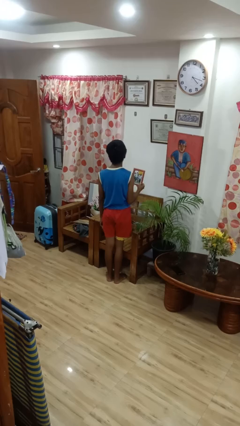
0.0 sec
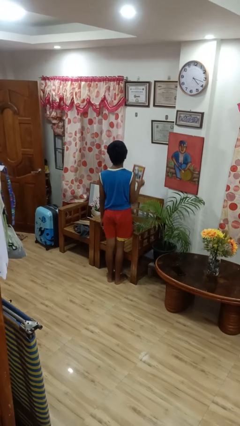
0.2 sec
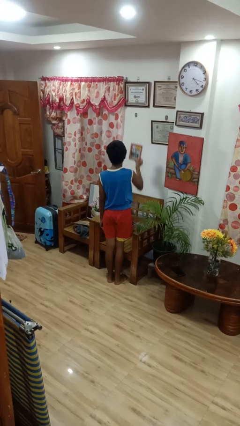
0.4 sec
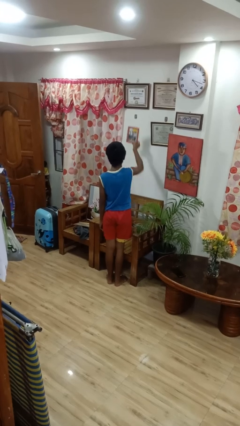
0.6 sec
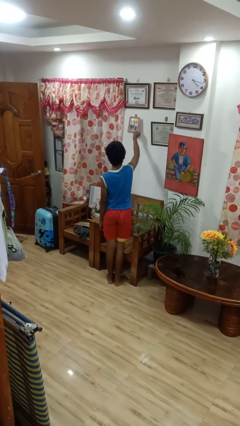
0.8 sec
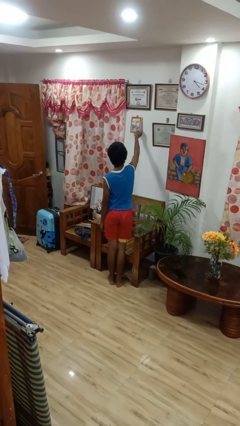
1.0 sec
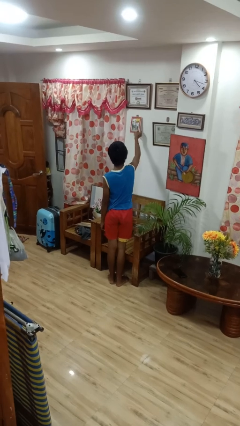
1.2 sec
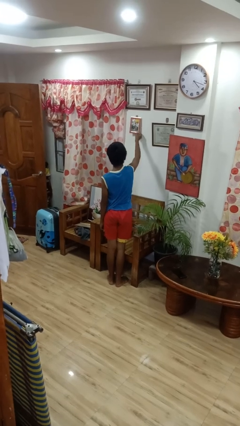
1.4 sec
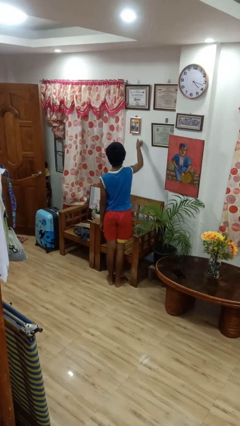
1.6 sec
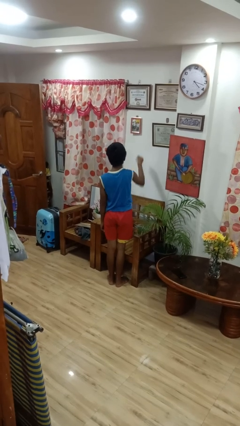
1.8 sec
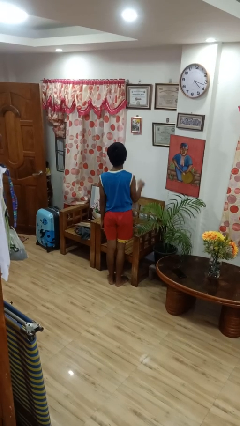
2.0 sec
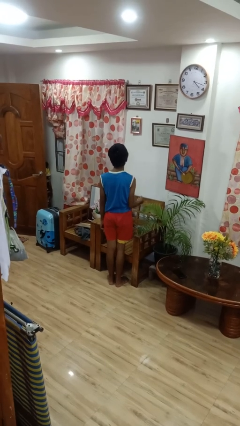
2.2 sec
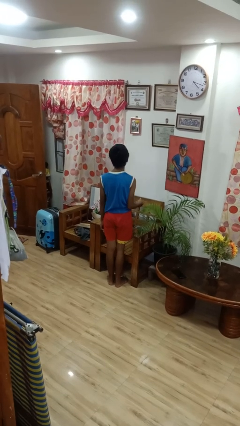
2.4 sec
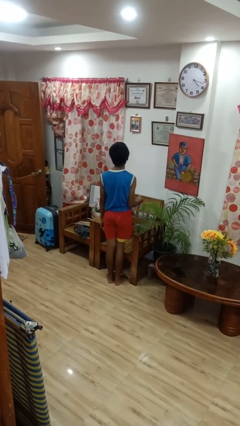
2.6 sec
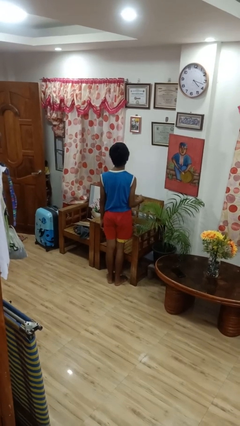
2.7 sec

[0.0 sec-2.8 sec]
person puts up picture frame

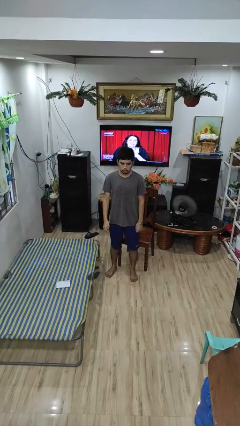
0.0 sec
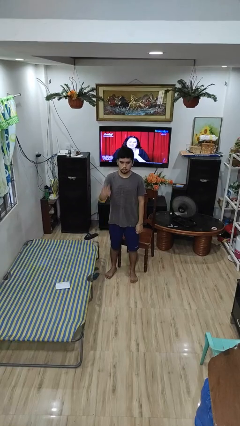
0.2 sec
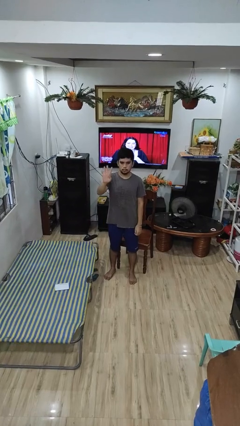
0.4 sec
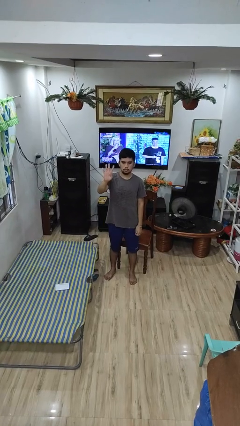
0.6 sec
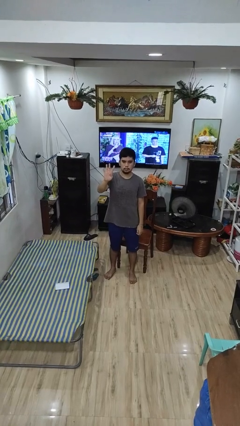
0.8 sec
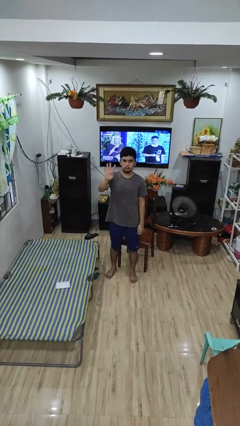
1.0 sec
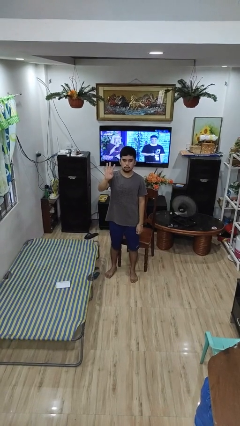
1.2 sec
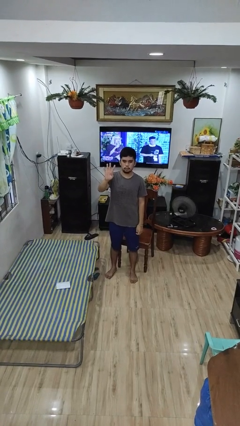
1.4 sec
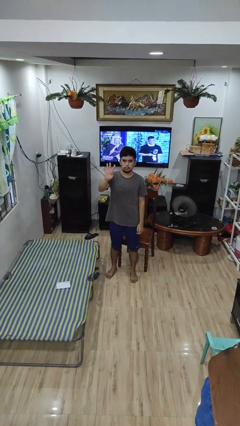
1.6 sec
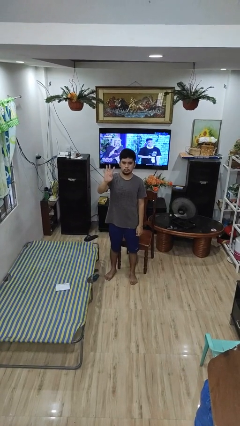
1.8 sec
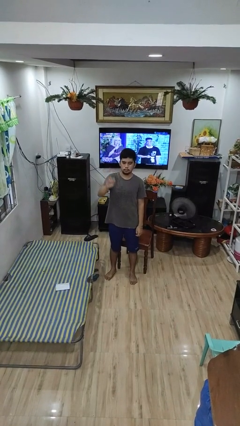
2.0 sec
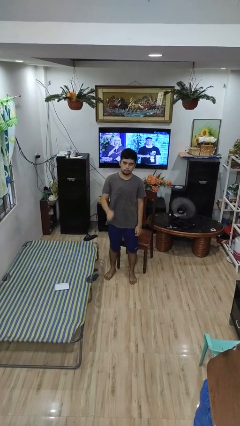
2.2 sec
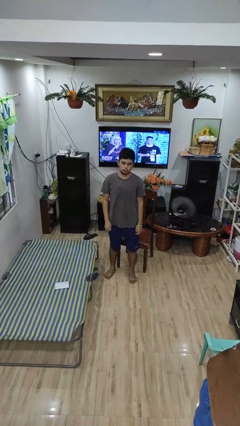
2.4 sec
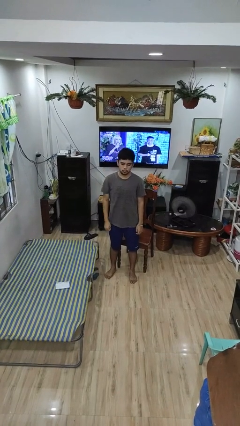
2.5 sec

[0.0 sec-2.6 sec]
person gestures number four

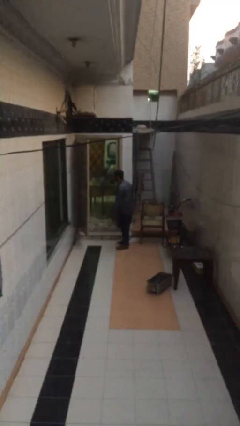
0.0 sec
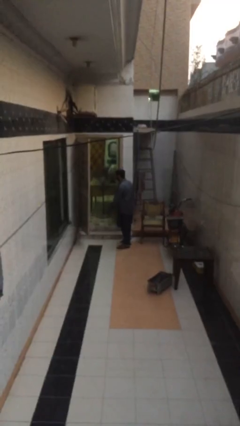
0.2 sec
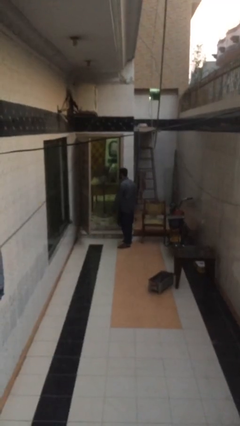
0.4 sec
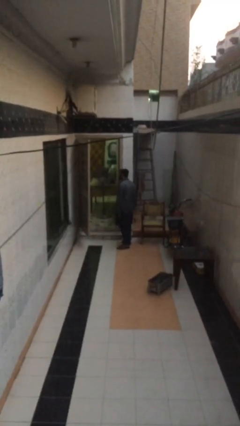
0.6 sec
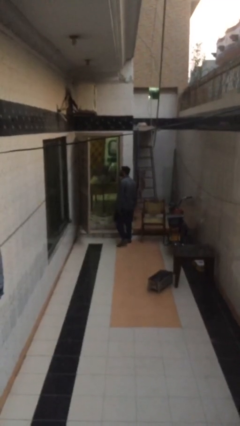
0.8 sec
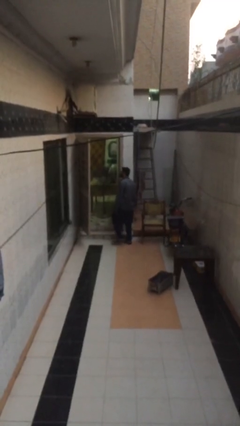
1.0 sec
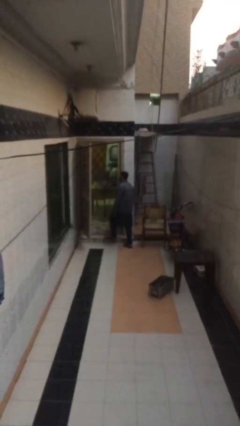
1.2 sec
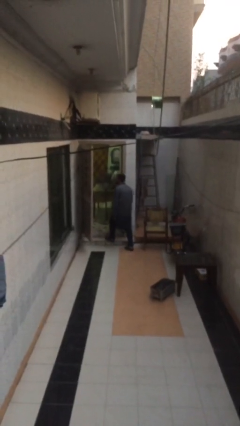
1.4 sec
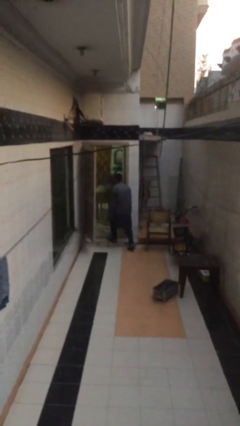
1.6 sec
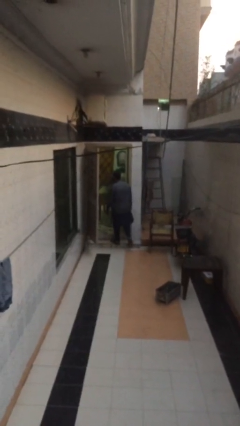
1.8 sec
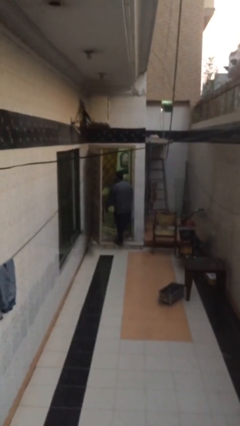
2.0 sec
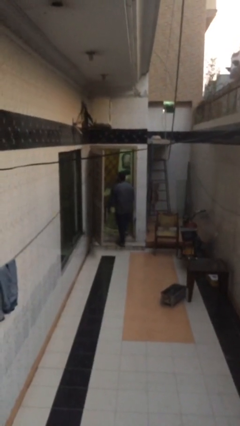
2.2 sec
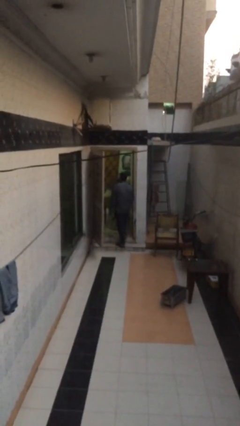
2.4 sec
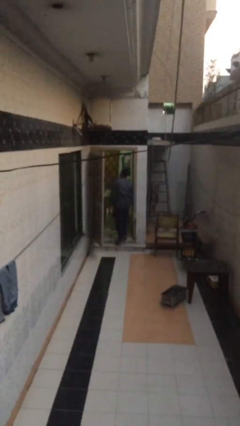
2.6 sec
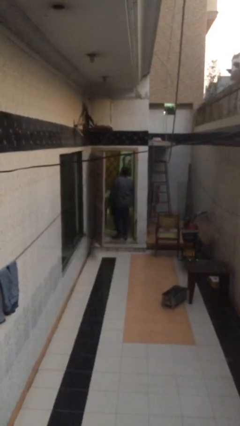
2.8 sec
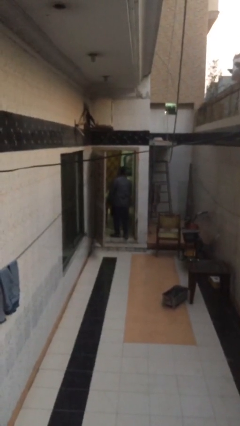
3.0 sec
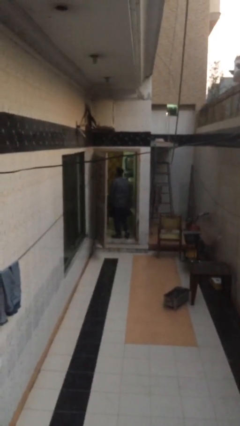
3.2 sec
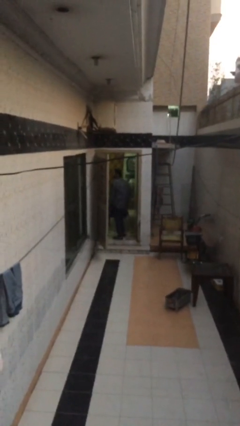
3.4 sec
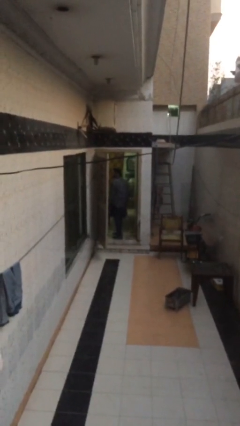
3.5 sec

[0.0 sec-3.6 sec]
person exits scene through structure

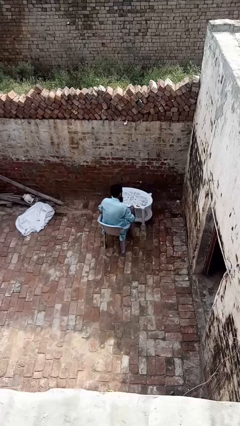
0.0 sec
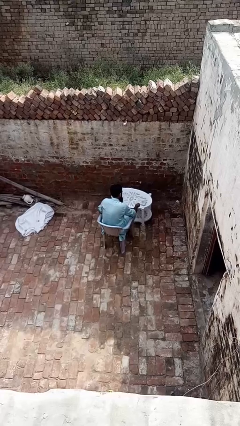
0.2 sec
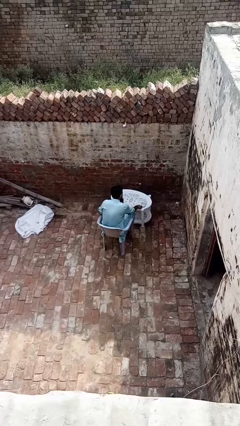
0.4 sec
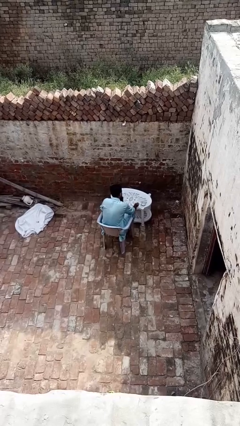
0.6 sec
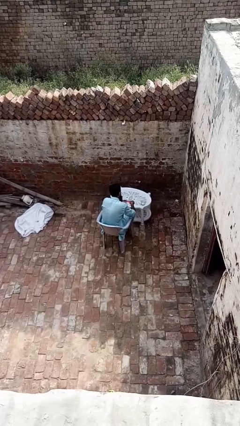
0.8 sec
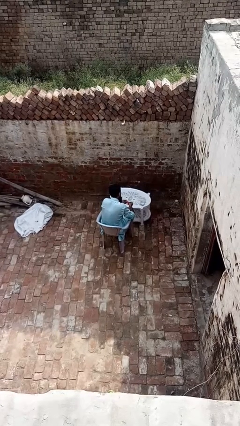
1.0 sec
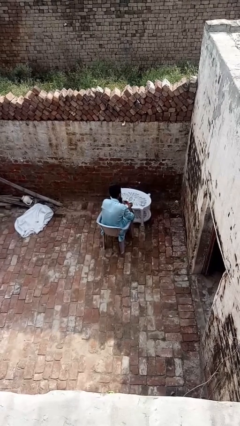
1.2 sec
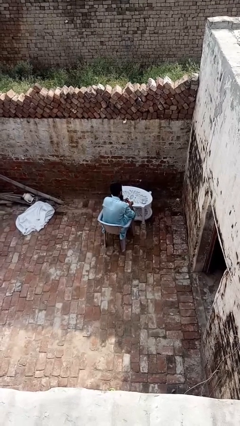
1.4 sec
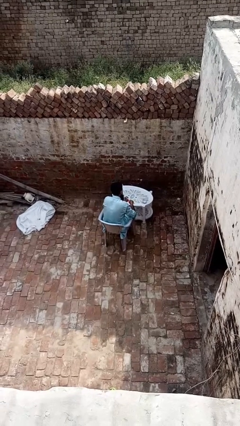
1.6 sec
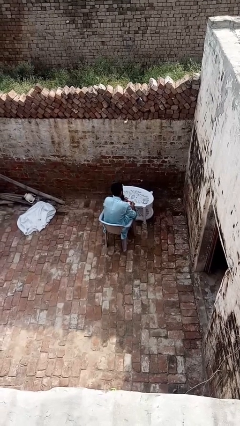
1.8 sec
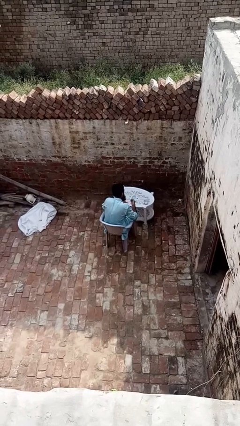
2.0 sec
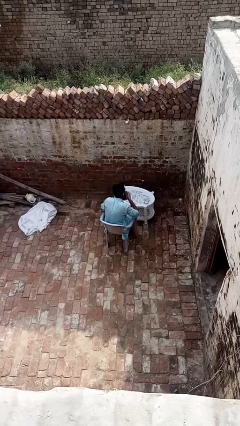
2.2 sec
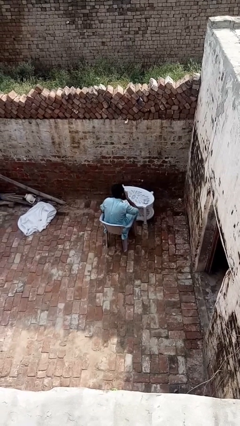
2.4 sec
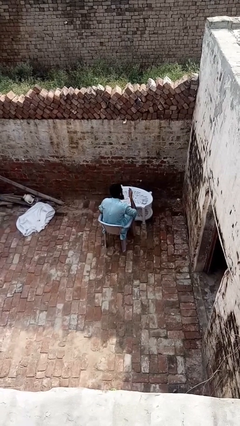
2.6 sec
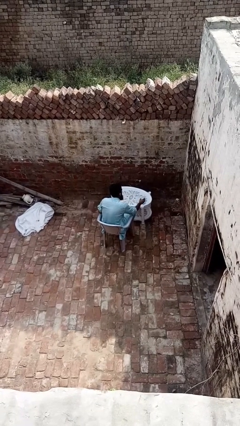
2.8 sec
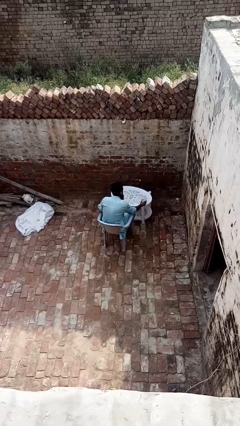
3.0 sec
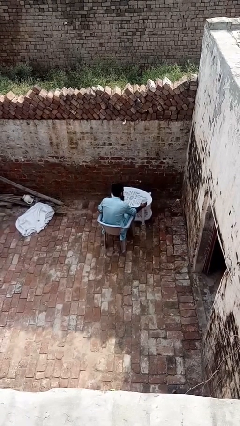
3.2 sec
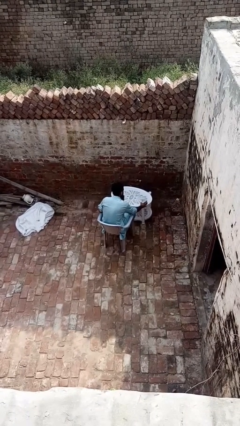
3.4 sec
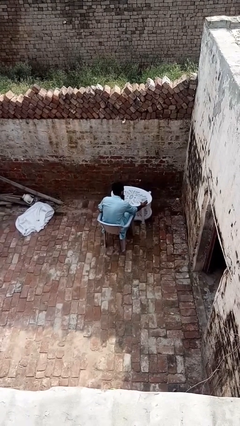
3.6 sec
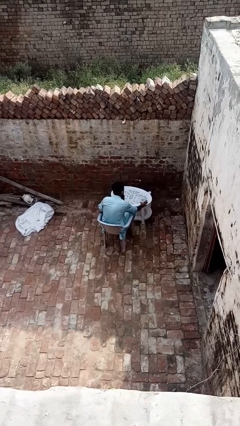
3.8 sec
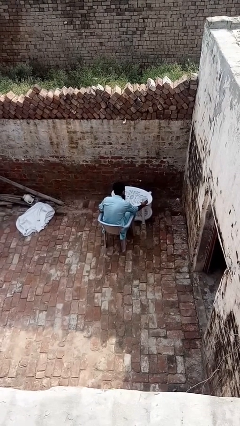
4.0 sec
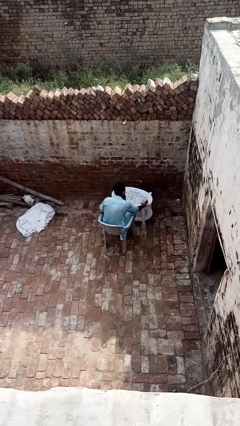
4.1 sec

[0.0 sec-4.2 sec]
person takes medicine pills

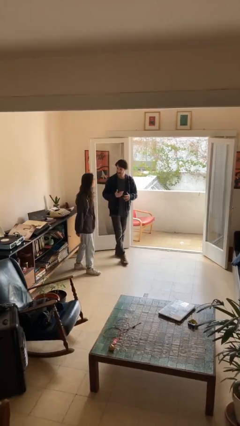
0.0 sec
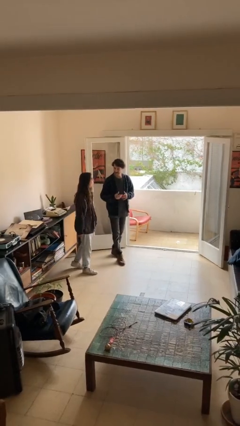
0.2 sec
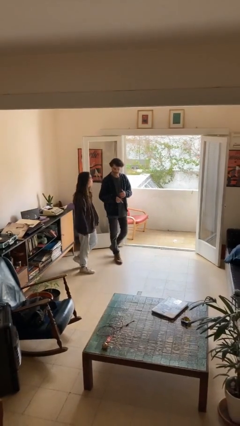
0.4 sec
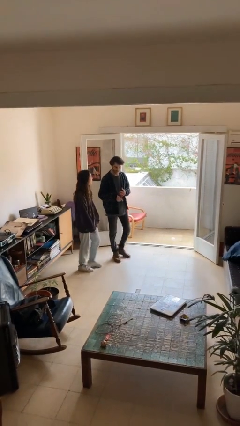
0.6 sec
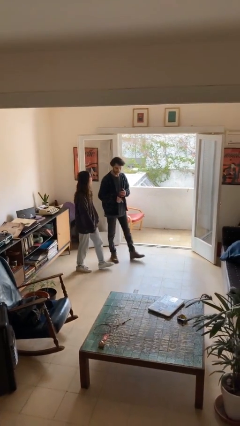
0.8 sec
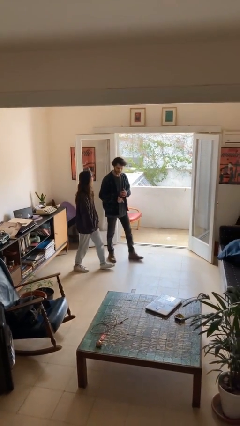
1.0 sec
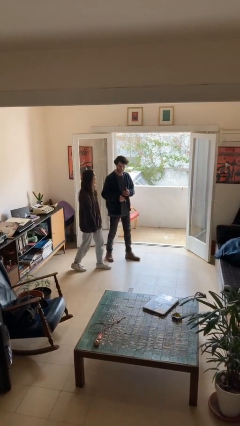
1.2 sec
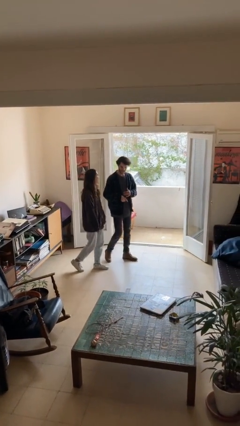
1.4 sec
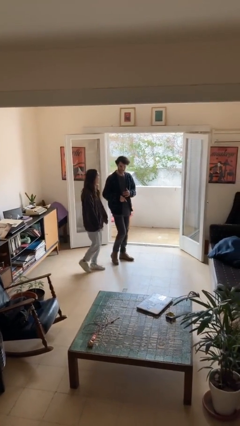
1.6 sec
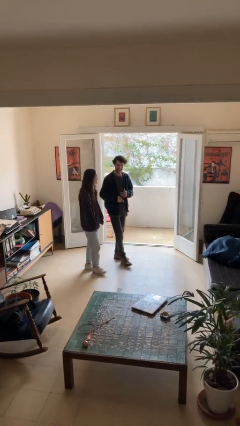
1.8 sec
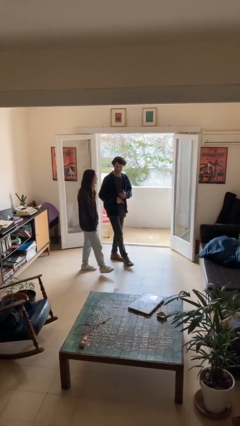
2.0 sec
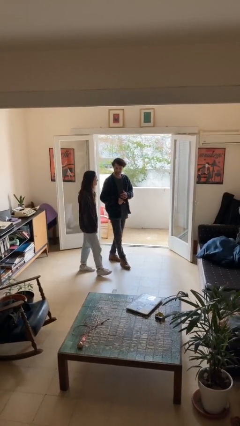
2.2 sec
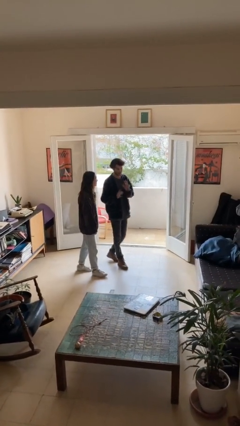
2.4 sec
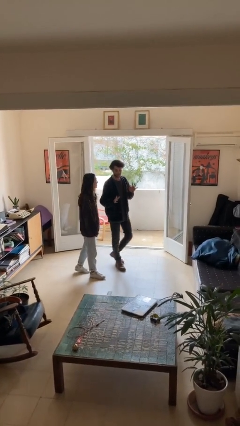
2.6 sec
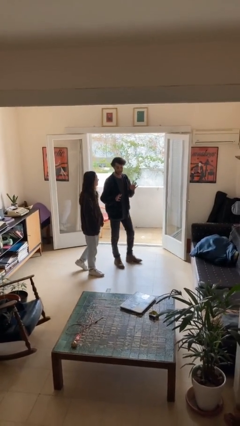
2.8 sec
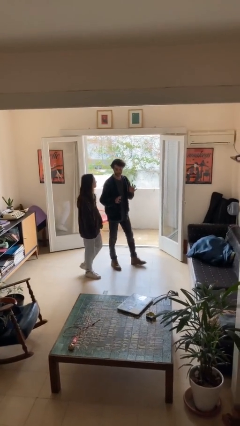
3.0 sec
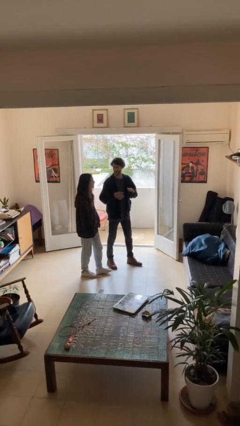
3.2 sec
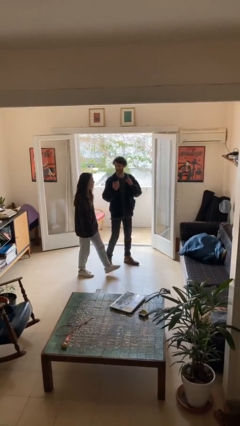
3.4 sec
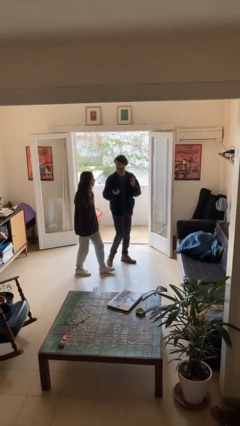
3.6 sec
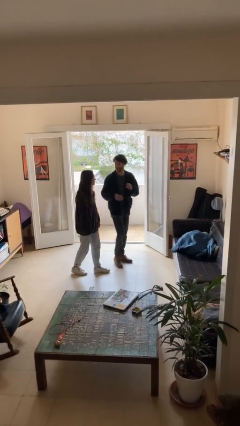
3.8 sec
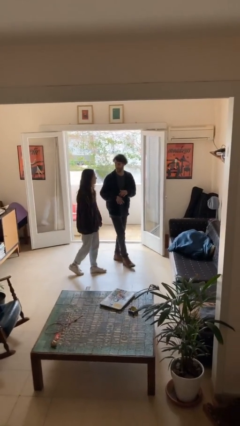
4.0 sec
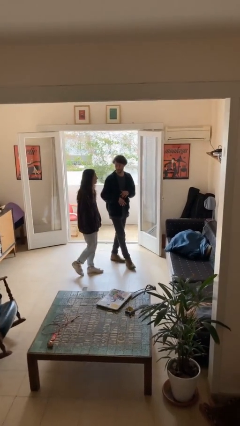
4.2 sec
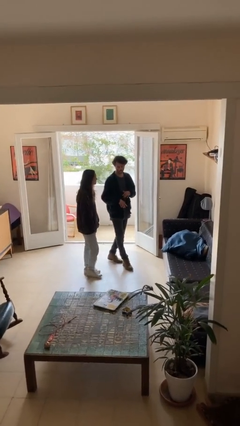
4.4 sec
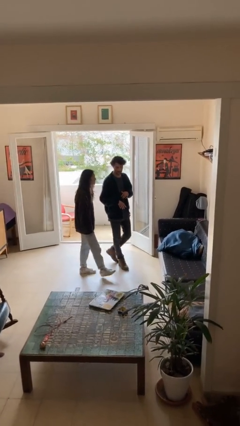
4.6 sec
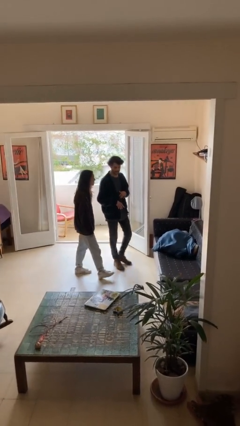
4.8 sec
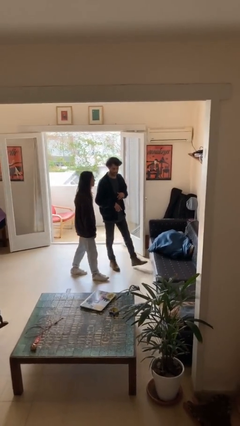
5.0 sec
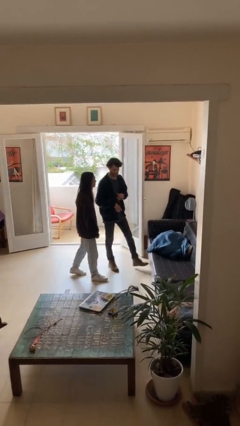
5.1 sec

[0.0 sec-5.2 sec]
person talks to person
